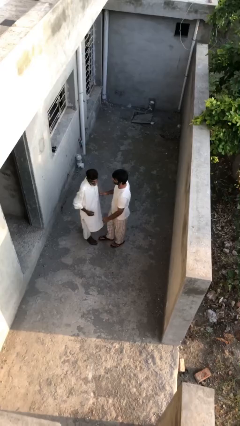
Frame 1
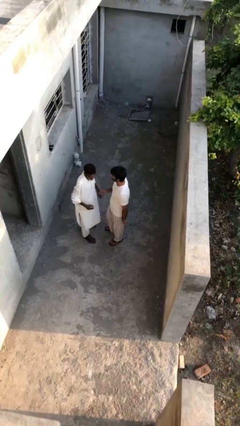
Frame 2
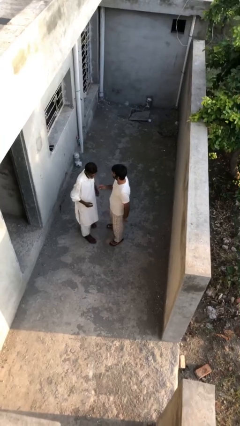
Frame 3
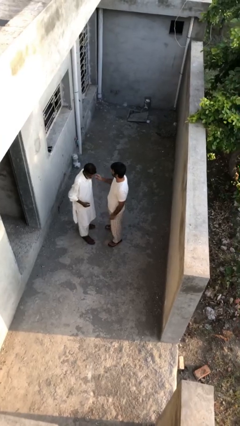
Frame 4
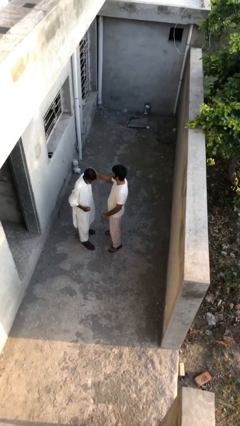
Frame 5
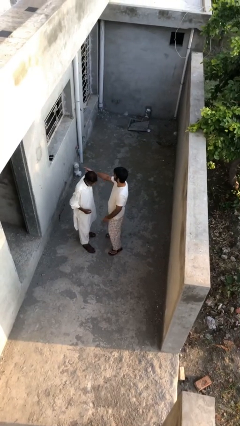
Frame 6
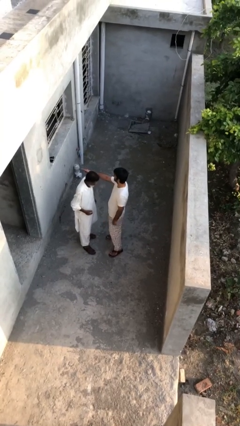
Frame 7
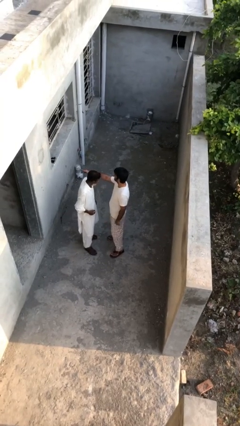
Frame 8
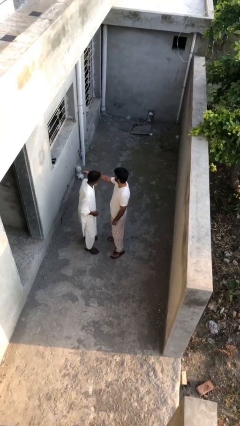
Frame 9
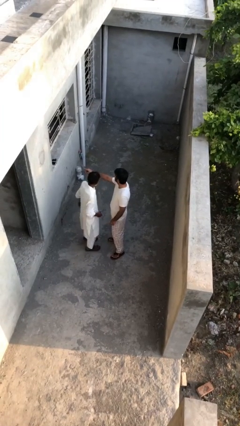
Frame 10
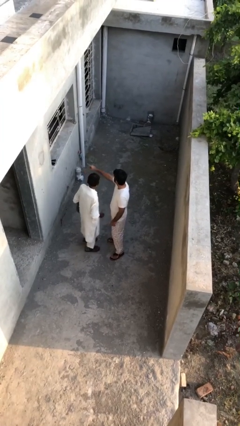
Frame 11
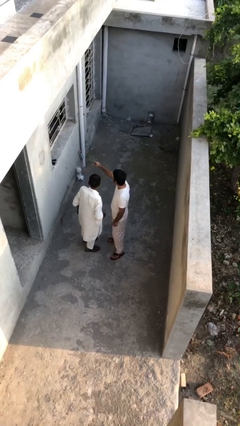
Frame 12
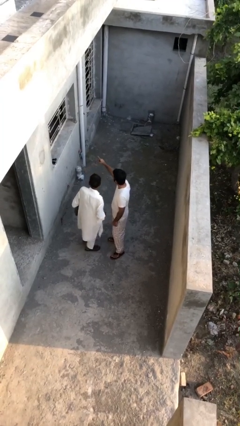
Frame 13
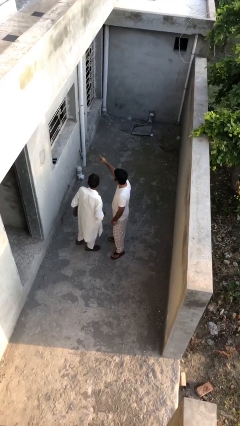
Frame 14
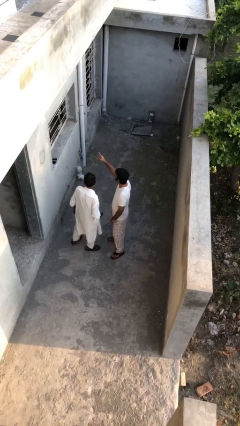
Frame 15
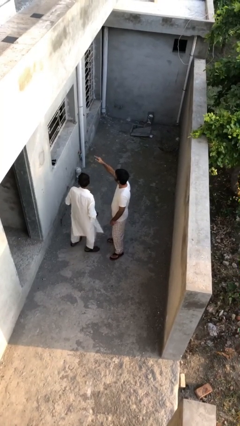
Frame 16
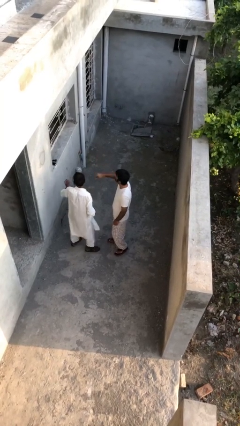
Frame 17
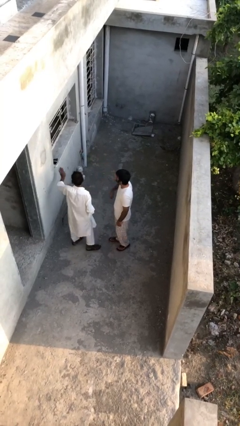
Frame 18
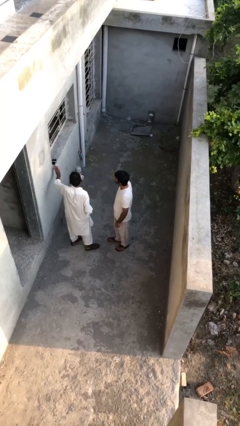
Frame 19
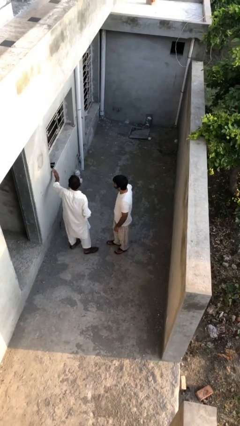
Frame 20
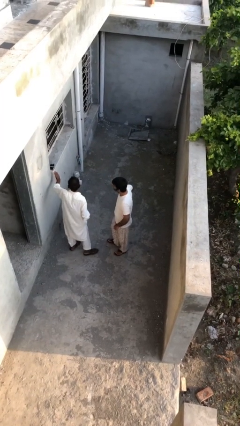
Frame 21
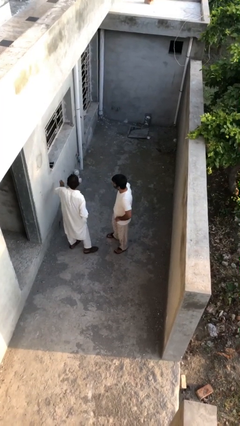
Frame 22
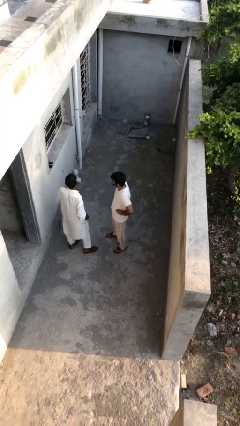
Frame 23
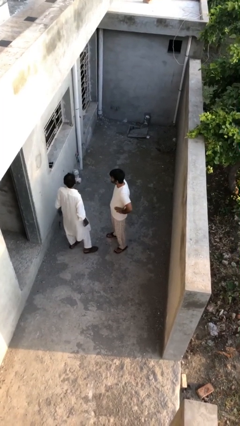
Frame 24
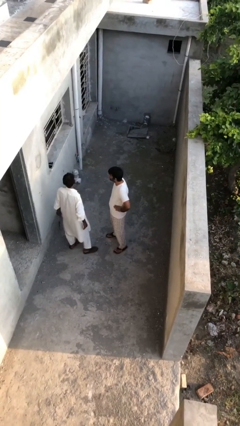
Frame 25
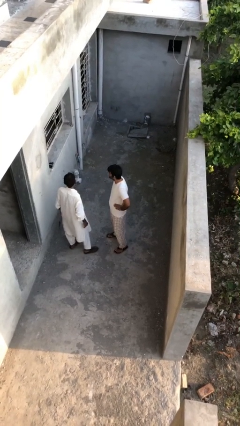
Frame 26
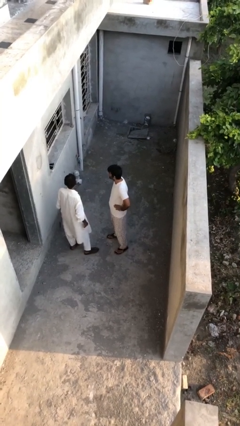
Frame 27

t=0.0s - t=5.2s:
person talks to person

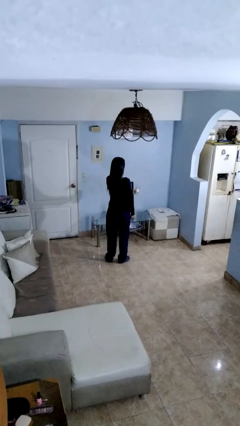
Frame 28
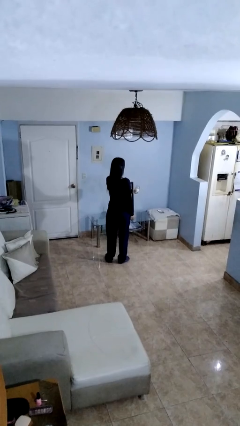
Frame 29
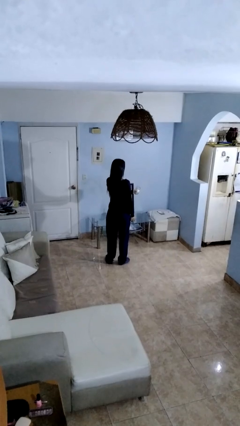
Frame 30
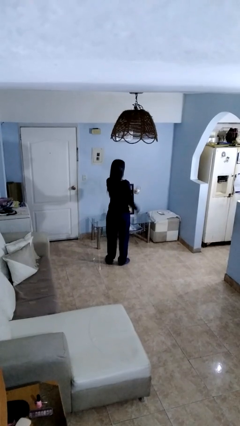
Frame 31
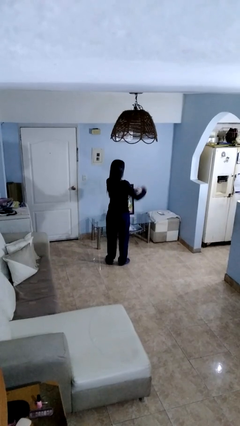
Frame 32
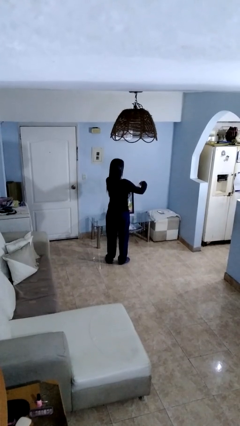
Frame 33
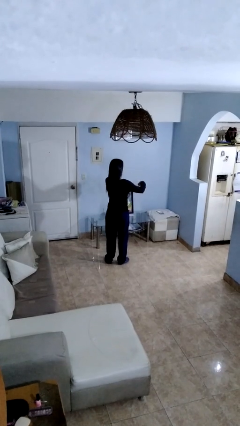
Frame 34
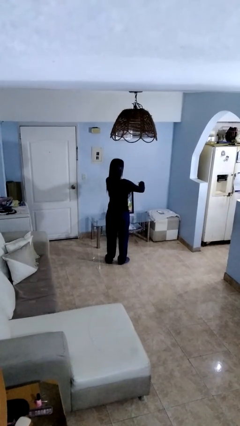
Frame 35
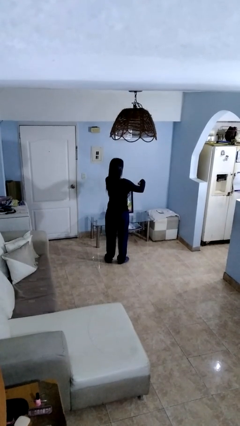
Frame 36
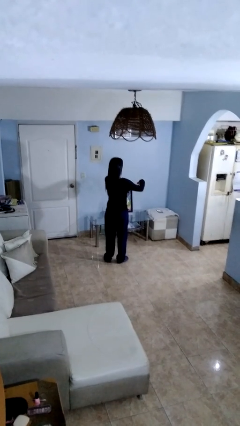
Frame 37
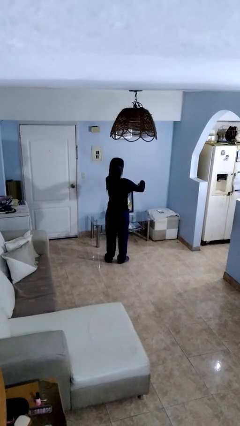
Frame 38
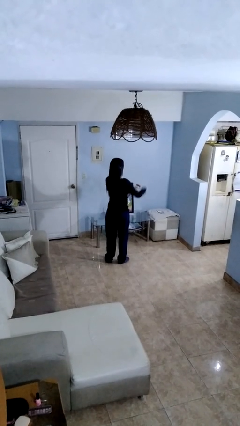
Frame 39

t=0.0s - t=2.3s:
person closes jar

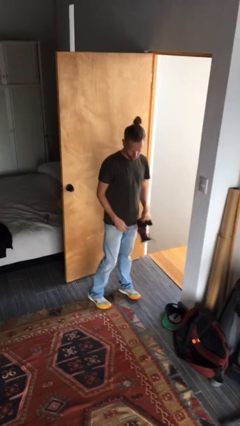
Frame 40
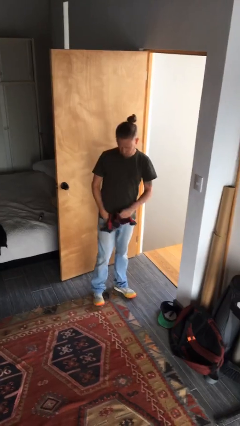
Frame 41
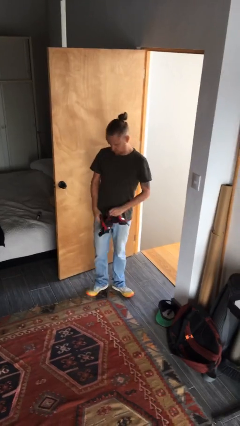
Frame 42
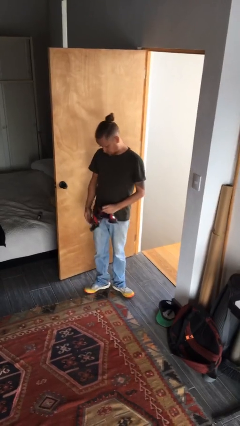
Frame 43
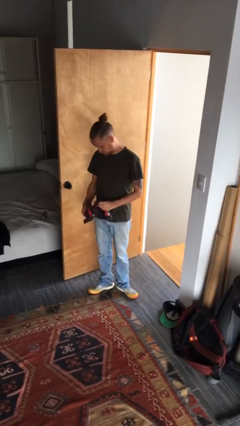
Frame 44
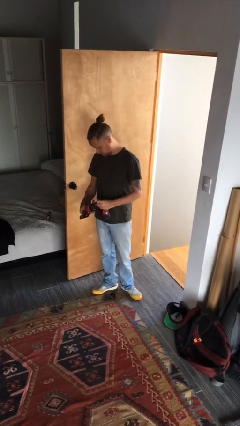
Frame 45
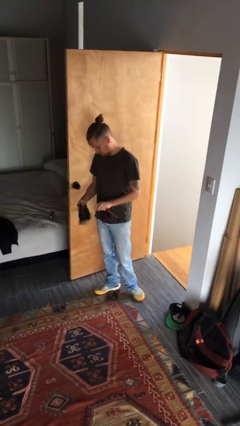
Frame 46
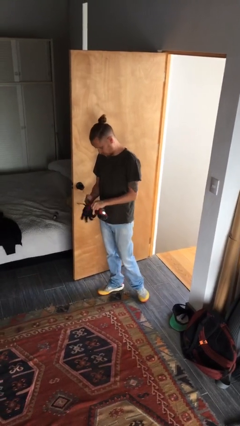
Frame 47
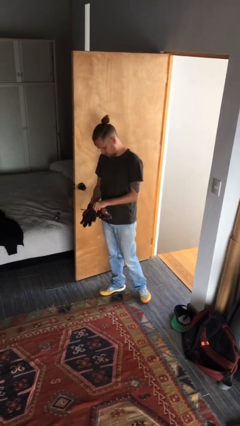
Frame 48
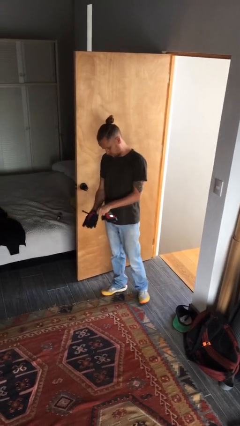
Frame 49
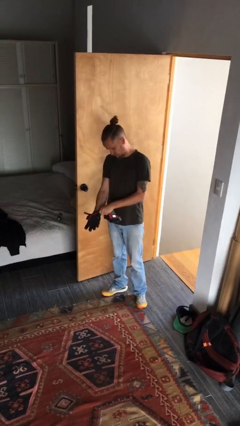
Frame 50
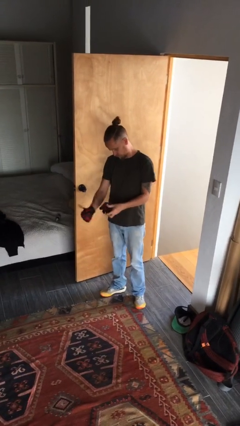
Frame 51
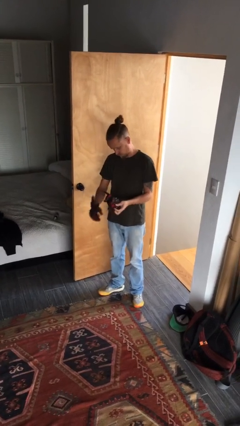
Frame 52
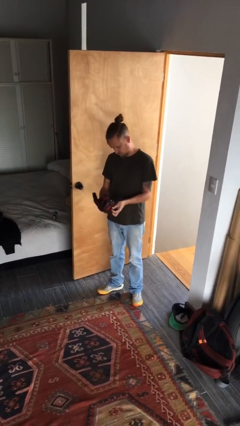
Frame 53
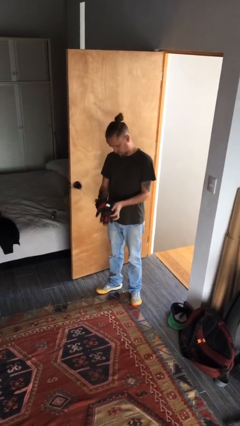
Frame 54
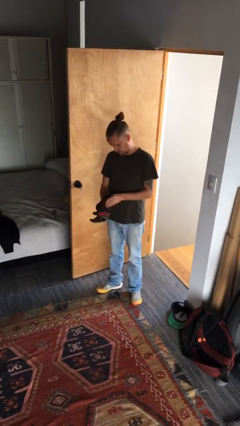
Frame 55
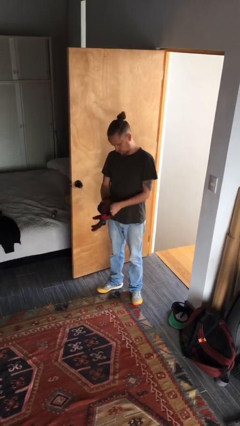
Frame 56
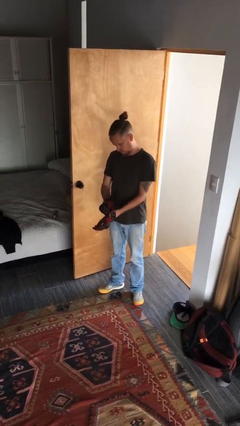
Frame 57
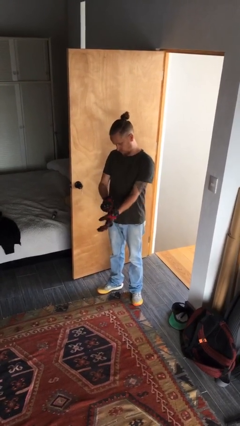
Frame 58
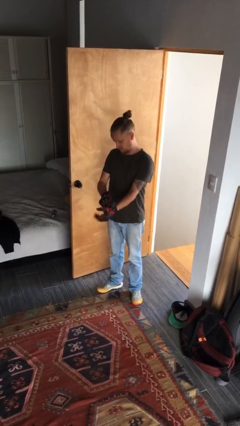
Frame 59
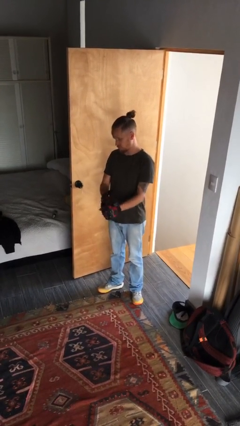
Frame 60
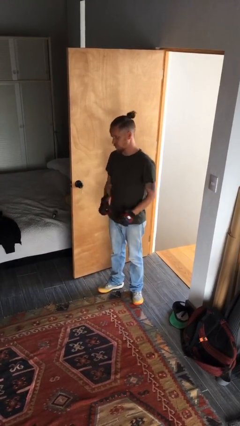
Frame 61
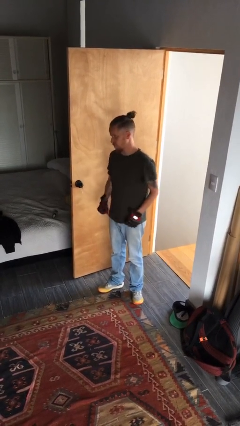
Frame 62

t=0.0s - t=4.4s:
person puts on gloves

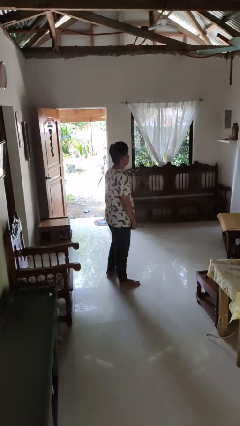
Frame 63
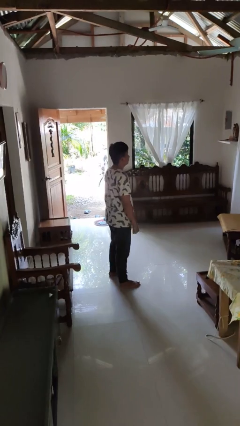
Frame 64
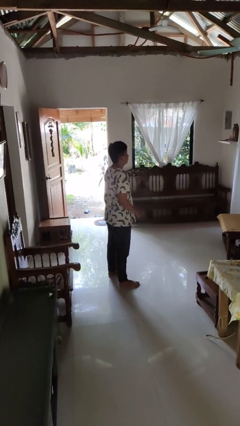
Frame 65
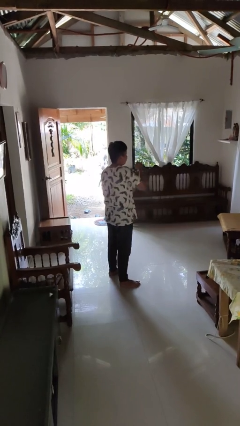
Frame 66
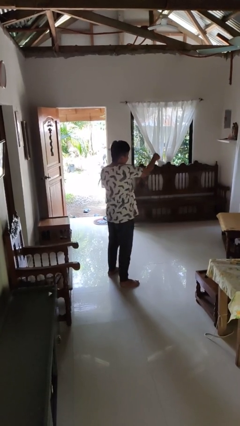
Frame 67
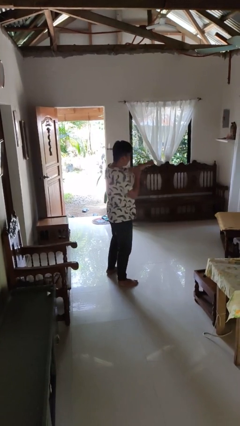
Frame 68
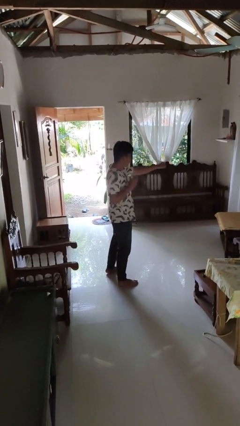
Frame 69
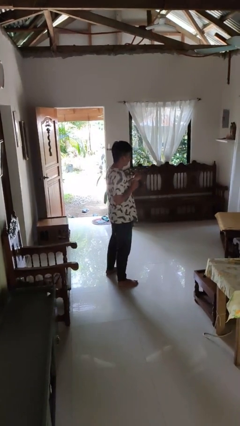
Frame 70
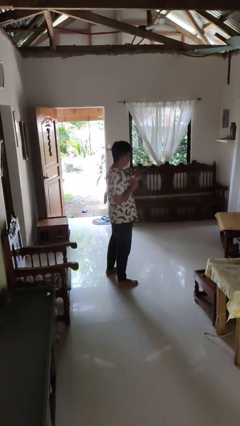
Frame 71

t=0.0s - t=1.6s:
person punches

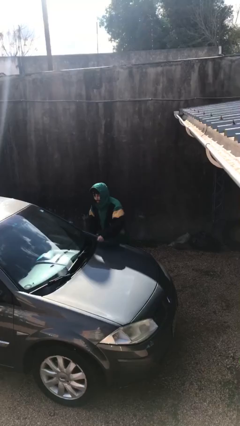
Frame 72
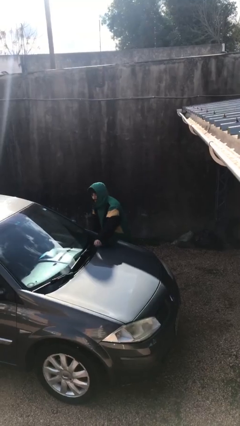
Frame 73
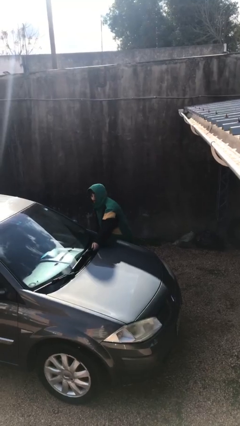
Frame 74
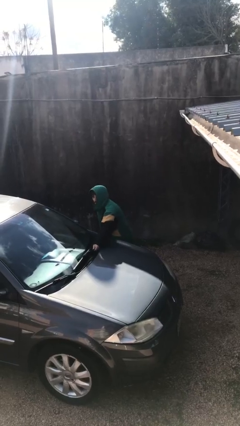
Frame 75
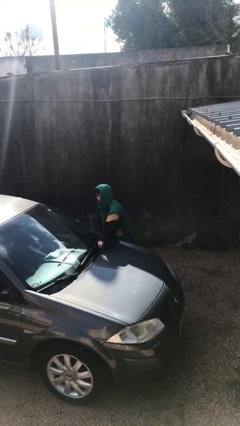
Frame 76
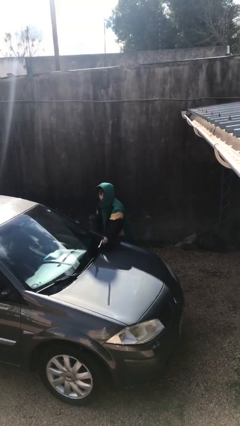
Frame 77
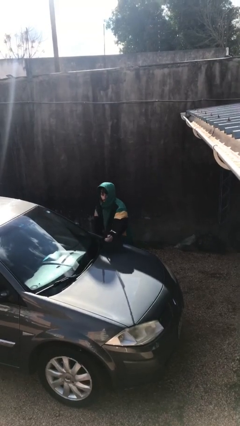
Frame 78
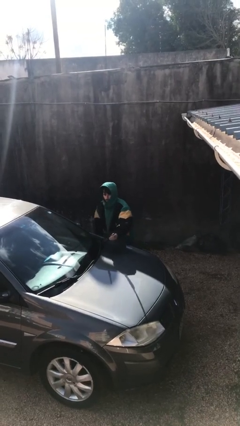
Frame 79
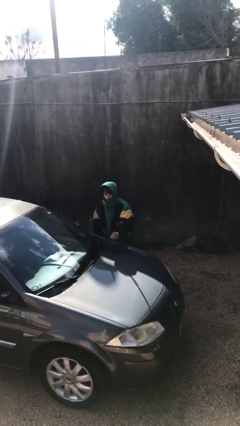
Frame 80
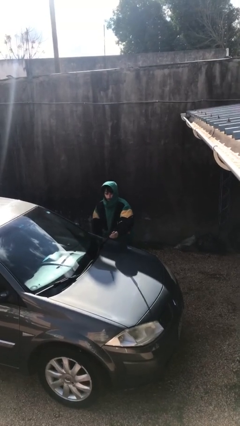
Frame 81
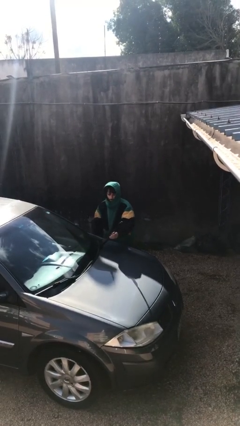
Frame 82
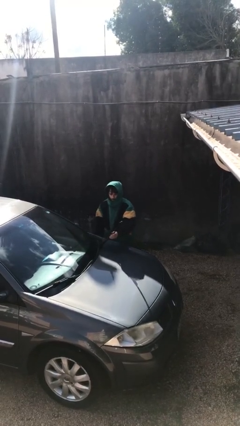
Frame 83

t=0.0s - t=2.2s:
person flips up car wipers

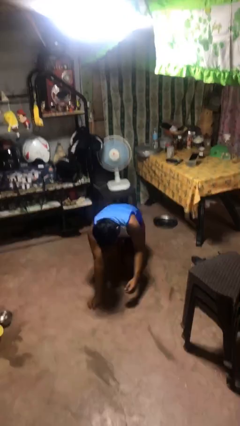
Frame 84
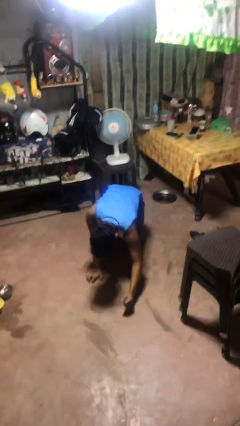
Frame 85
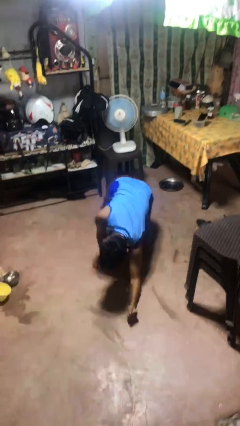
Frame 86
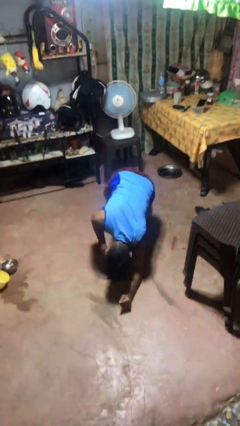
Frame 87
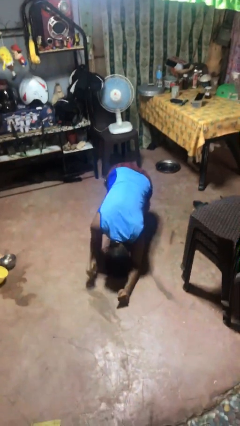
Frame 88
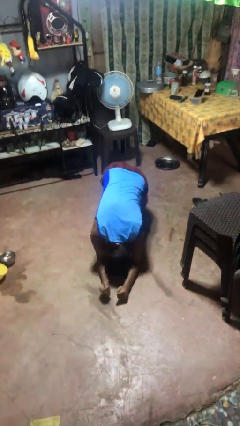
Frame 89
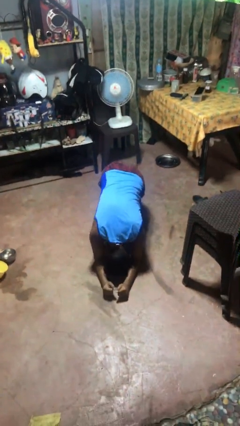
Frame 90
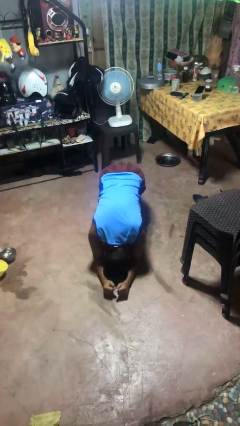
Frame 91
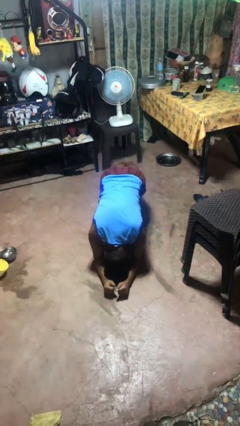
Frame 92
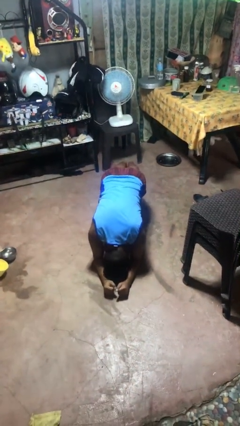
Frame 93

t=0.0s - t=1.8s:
person exercises with plank
